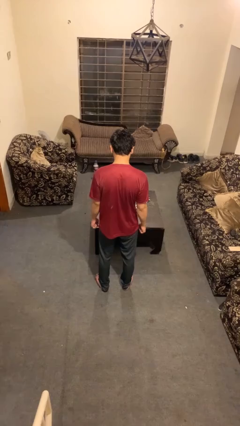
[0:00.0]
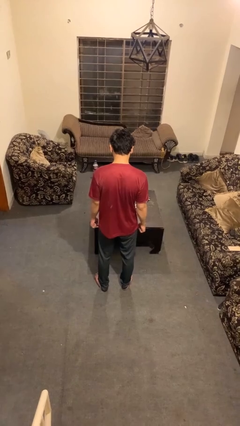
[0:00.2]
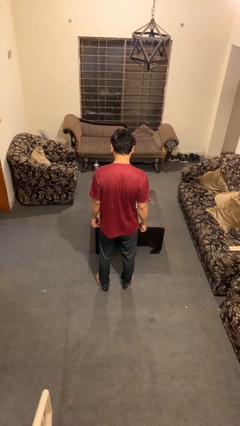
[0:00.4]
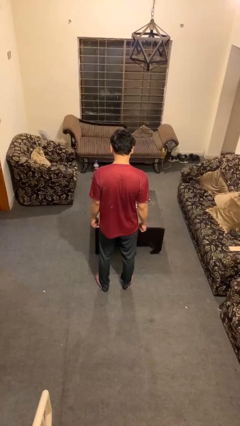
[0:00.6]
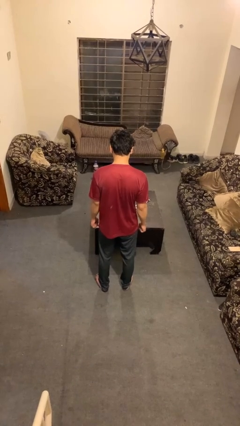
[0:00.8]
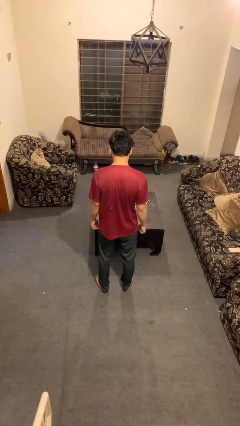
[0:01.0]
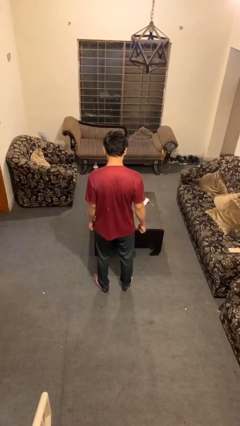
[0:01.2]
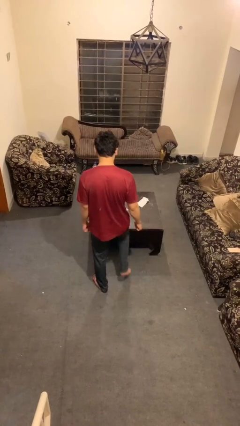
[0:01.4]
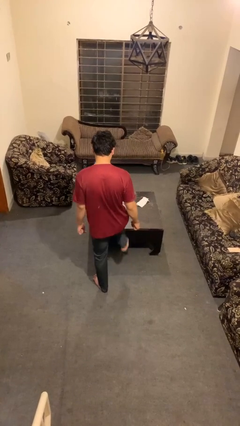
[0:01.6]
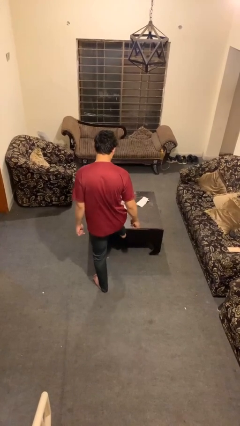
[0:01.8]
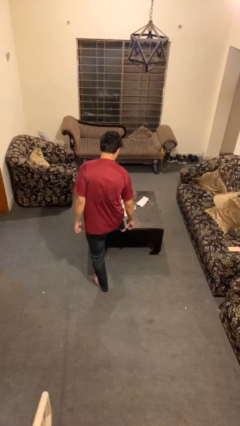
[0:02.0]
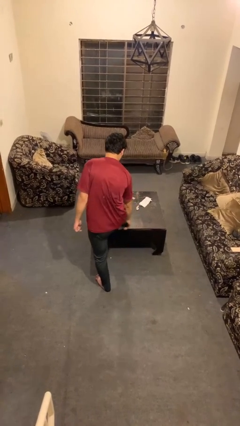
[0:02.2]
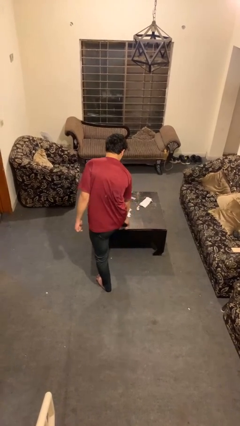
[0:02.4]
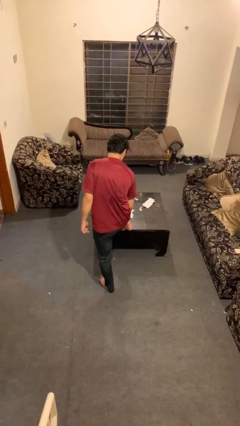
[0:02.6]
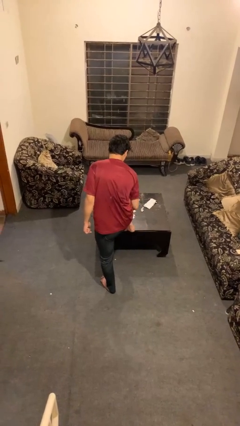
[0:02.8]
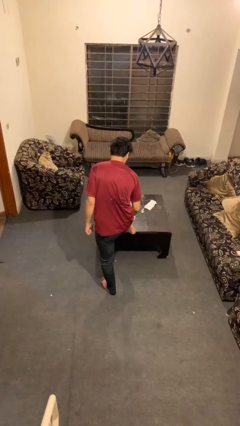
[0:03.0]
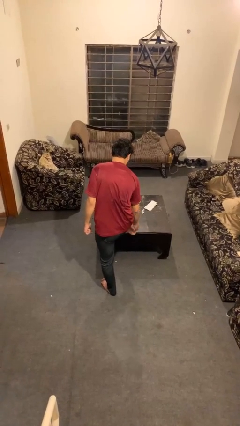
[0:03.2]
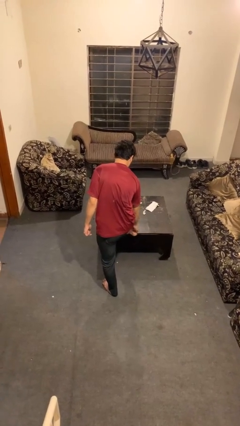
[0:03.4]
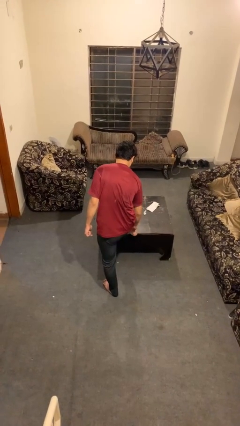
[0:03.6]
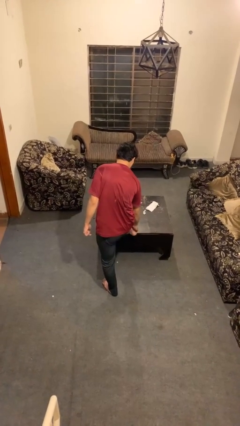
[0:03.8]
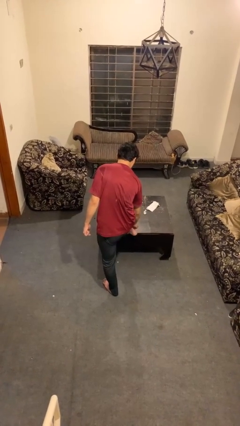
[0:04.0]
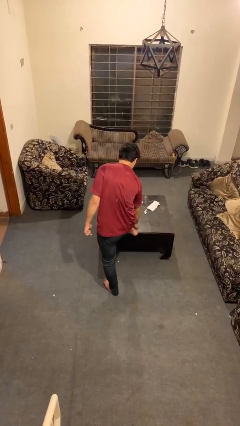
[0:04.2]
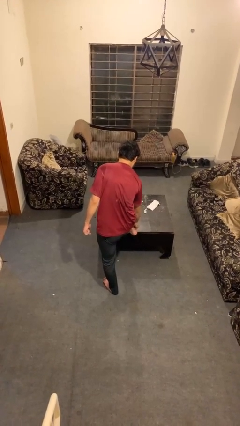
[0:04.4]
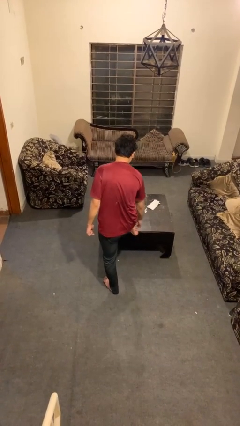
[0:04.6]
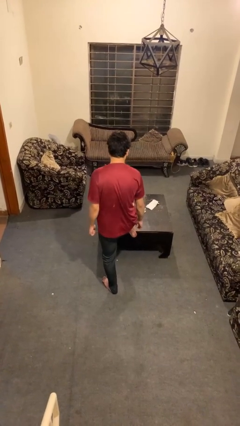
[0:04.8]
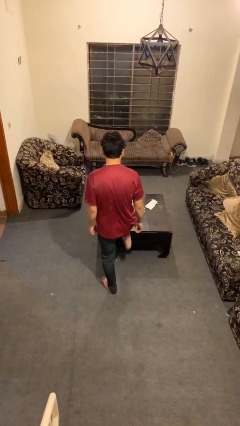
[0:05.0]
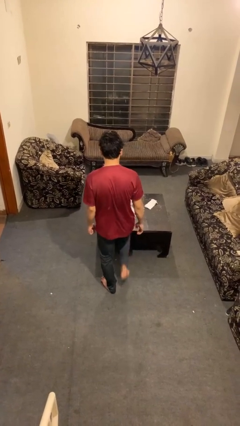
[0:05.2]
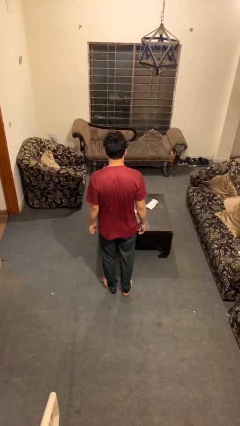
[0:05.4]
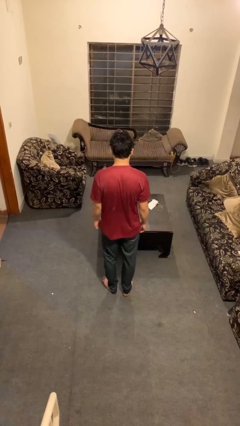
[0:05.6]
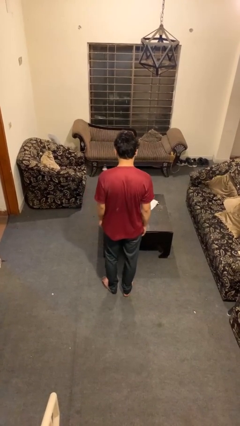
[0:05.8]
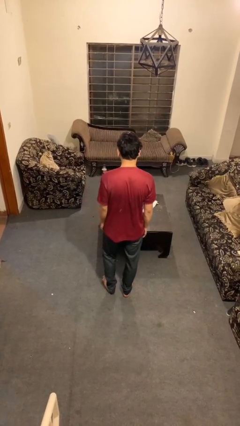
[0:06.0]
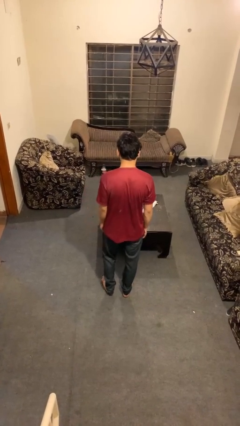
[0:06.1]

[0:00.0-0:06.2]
person rubs foot

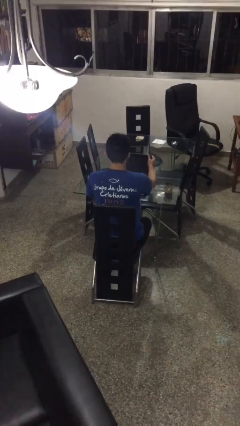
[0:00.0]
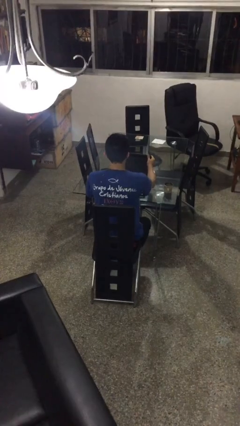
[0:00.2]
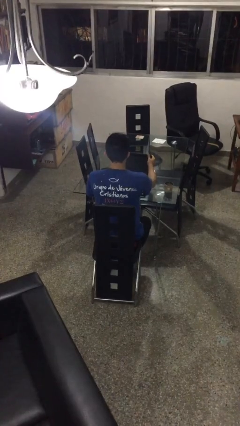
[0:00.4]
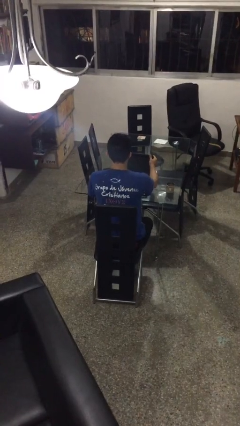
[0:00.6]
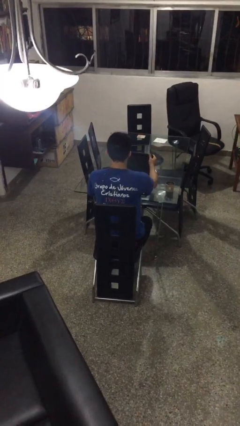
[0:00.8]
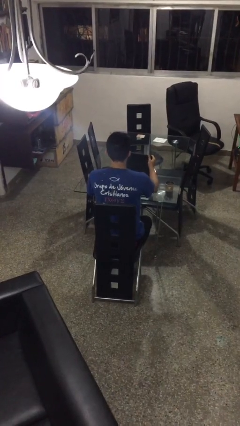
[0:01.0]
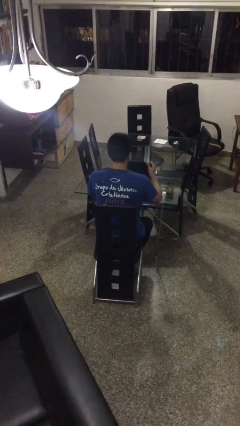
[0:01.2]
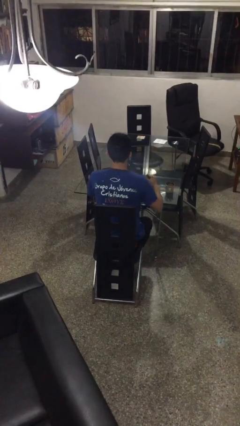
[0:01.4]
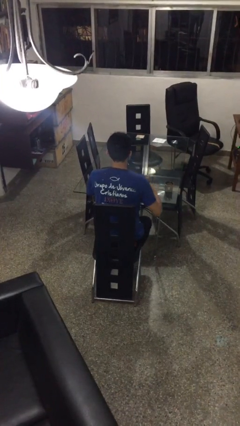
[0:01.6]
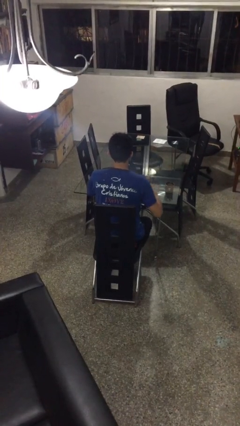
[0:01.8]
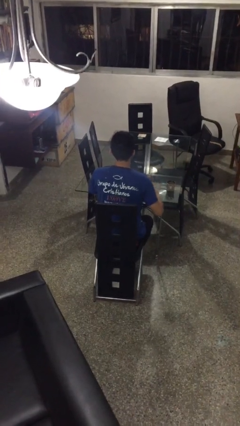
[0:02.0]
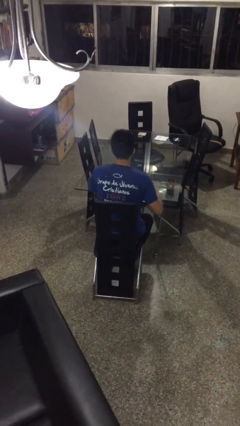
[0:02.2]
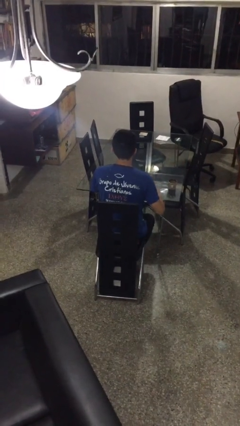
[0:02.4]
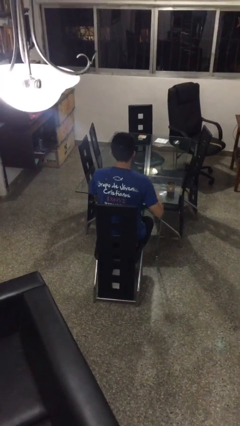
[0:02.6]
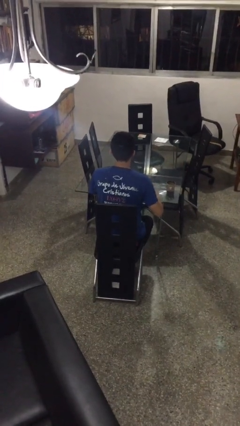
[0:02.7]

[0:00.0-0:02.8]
person closes laptop

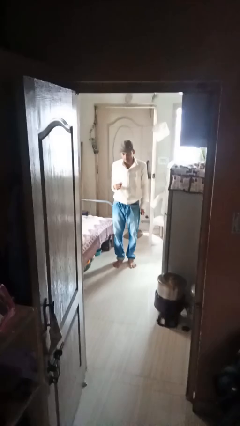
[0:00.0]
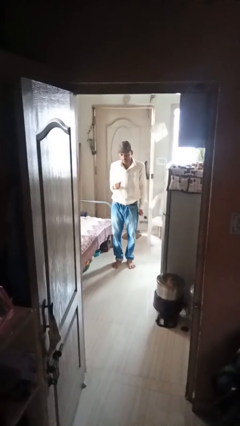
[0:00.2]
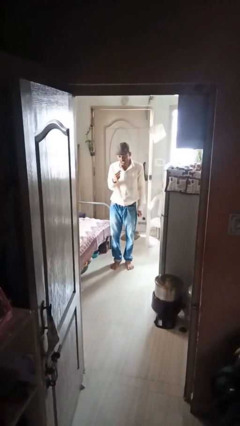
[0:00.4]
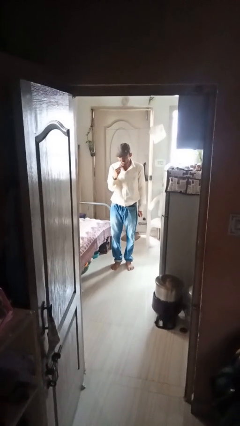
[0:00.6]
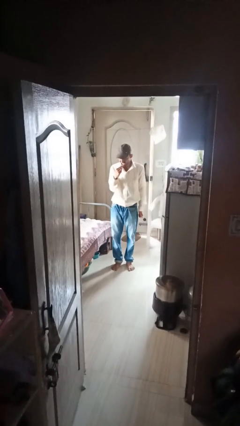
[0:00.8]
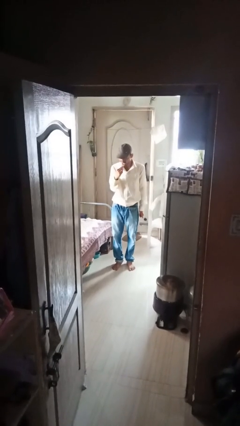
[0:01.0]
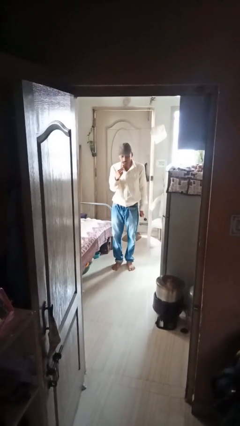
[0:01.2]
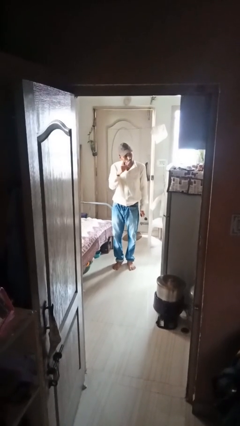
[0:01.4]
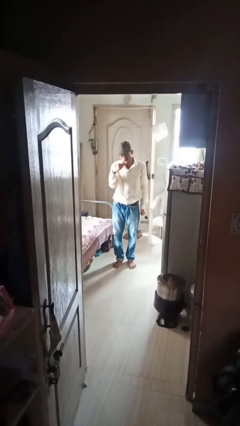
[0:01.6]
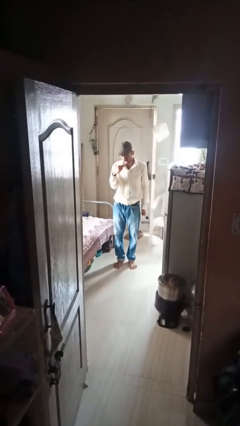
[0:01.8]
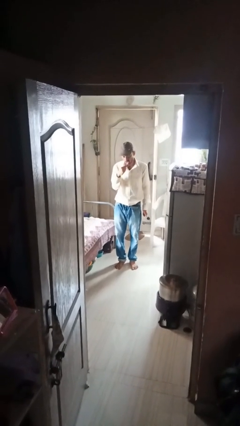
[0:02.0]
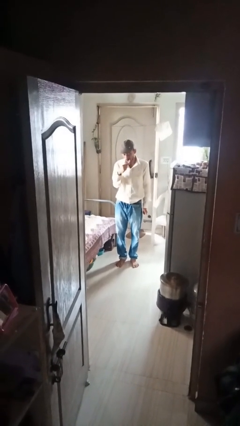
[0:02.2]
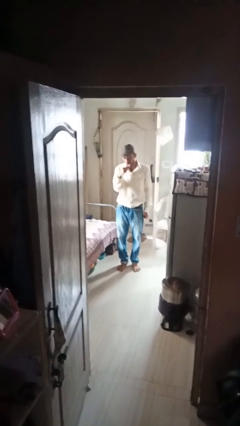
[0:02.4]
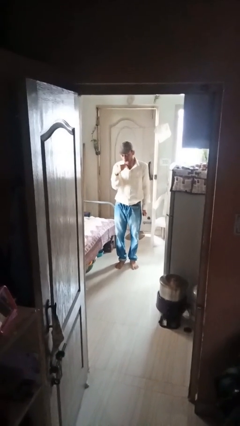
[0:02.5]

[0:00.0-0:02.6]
person brushes teeth

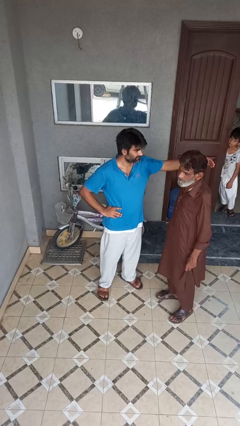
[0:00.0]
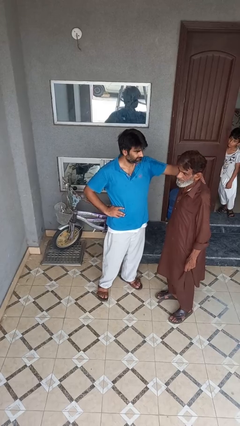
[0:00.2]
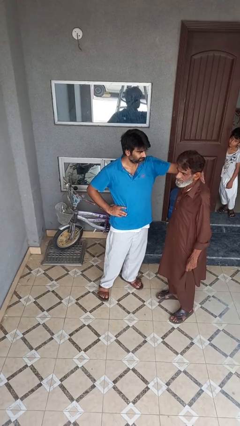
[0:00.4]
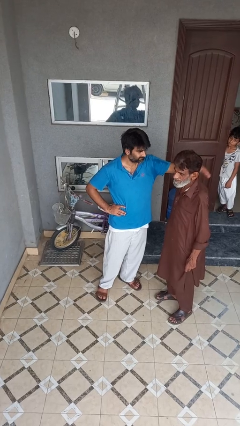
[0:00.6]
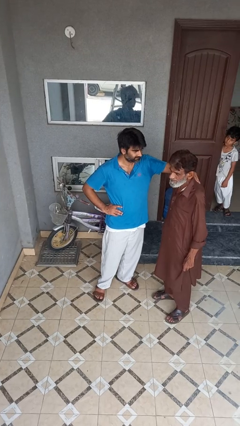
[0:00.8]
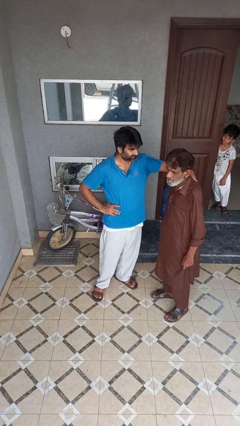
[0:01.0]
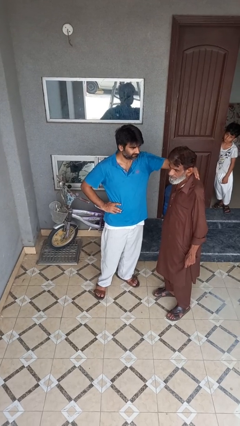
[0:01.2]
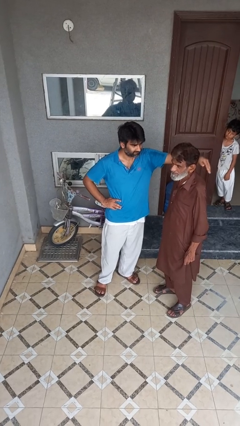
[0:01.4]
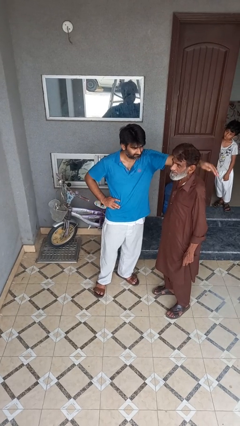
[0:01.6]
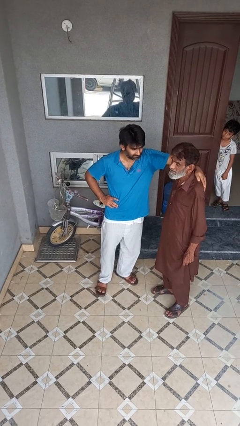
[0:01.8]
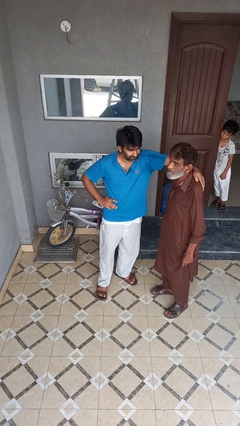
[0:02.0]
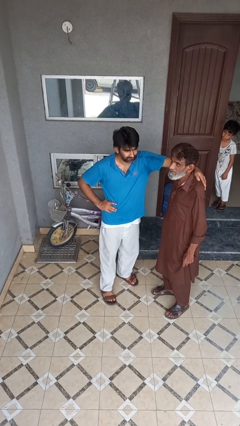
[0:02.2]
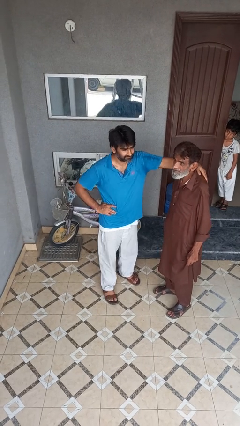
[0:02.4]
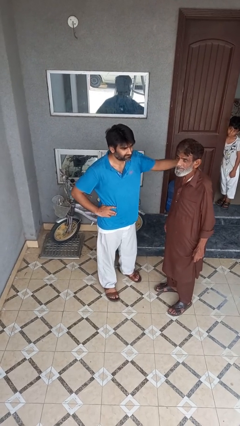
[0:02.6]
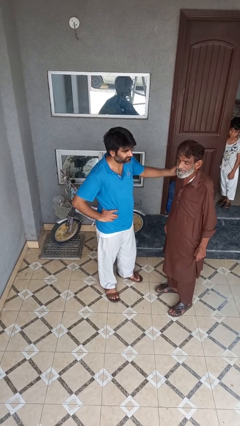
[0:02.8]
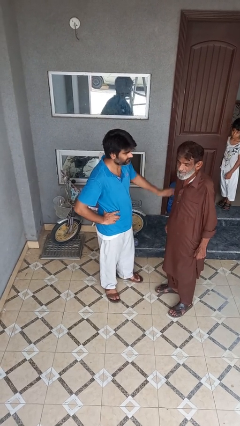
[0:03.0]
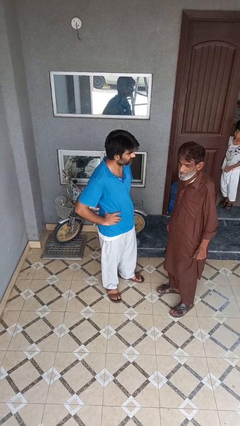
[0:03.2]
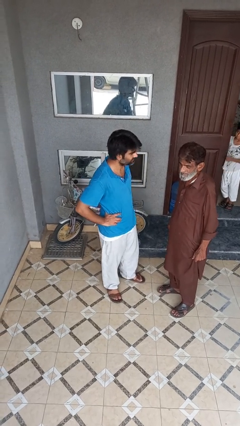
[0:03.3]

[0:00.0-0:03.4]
person pounds shoulders of person

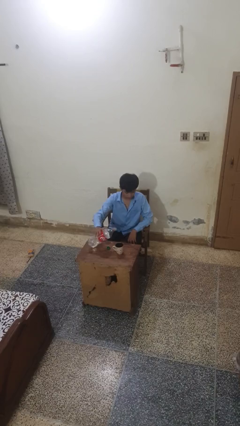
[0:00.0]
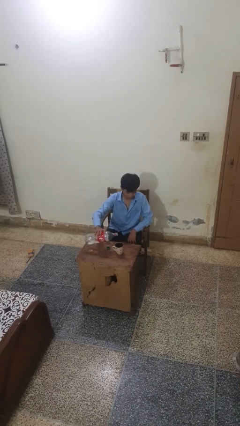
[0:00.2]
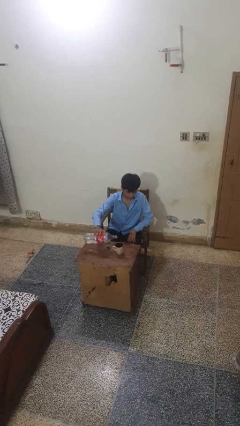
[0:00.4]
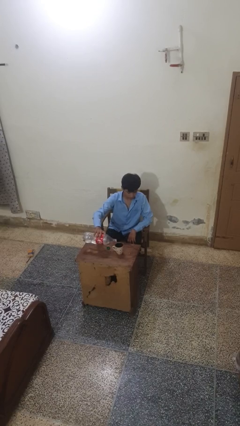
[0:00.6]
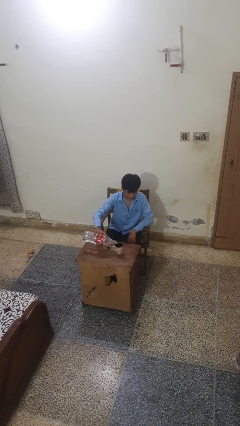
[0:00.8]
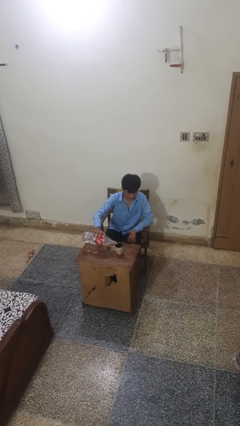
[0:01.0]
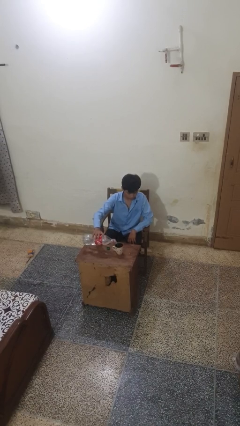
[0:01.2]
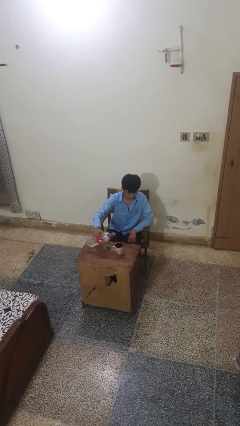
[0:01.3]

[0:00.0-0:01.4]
person pours liquid into cup

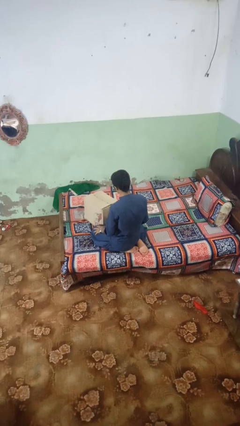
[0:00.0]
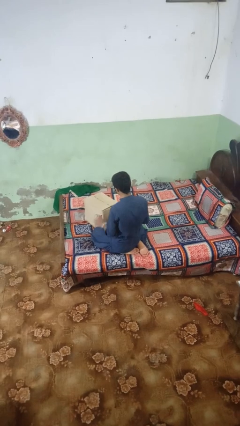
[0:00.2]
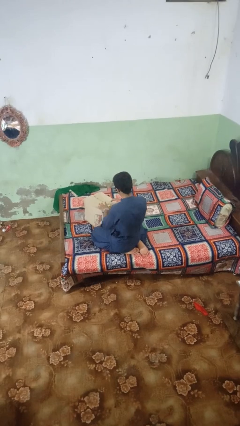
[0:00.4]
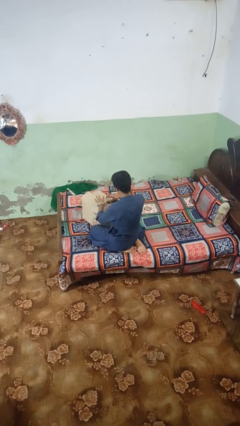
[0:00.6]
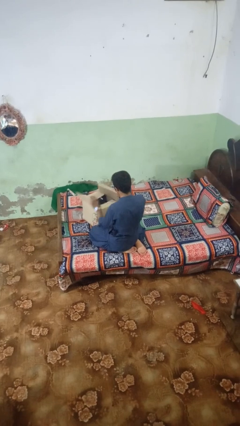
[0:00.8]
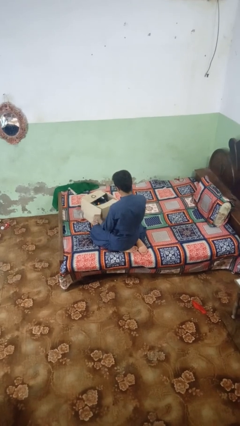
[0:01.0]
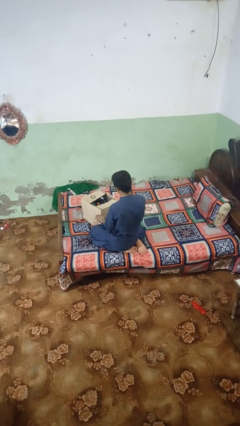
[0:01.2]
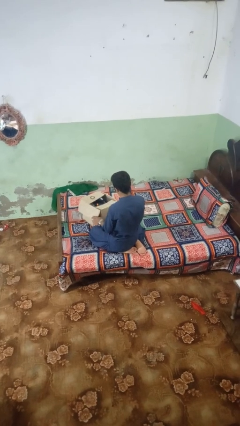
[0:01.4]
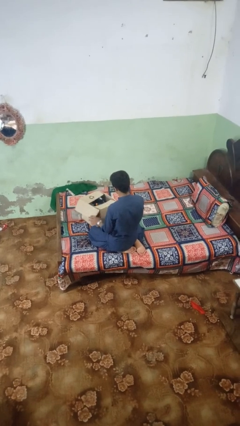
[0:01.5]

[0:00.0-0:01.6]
person opens box
